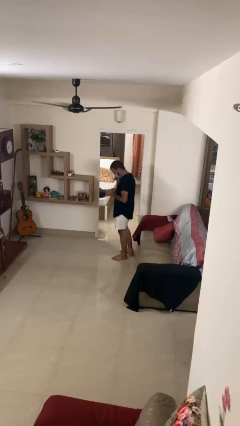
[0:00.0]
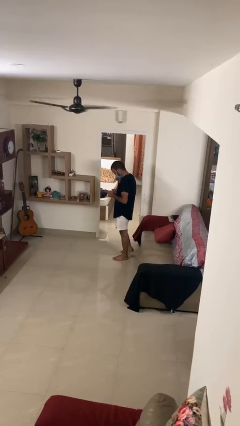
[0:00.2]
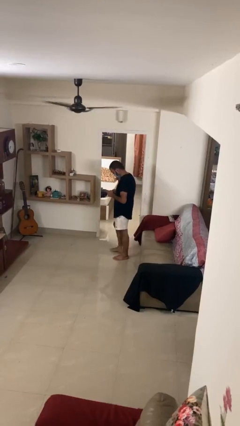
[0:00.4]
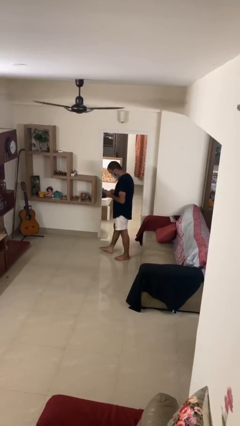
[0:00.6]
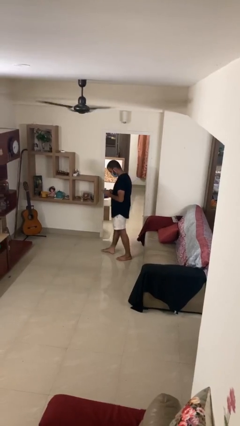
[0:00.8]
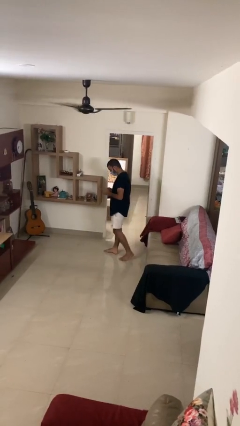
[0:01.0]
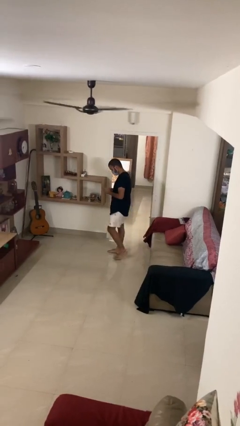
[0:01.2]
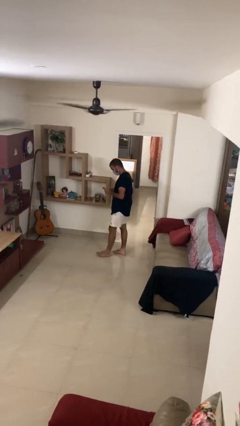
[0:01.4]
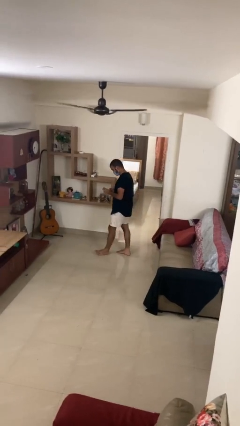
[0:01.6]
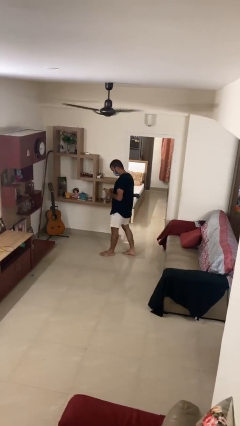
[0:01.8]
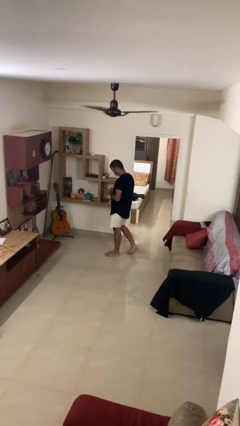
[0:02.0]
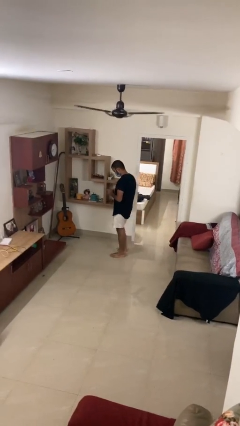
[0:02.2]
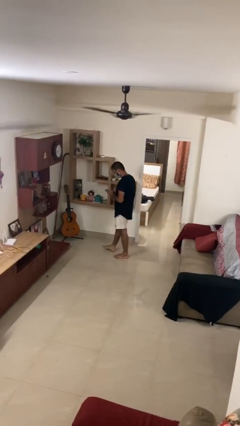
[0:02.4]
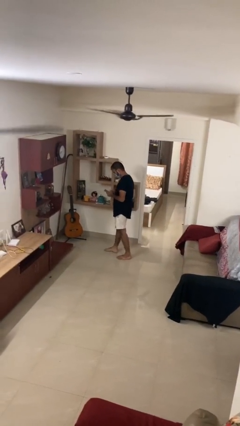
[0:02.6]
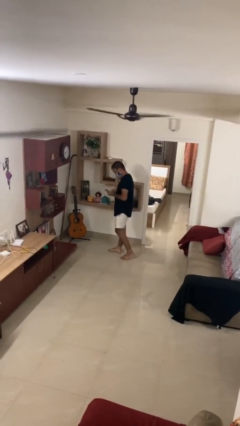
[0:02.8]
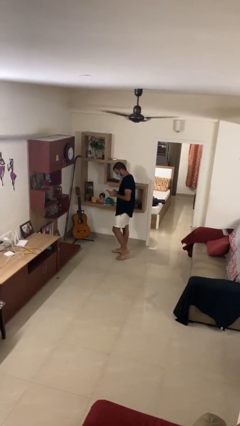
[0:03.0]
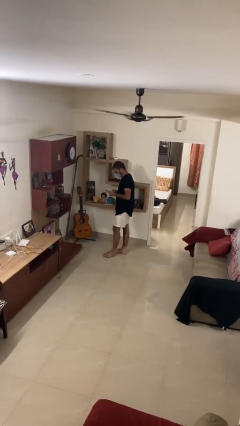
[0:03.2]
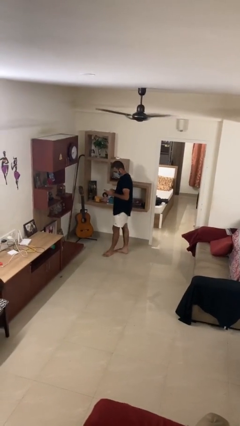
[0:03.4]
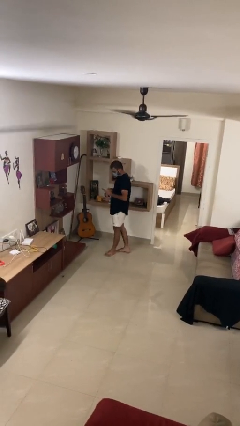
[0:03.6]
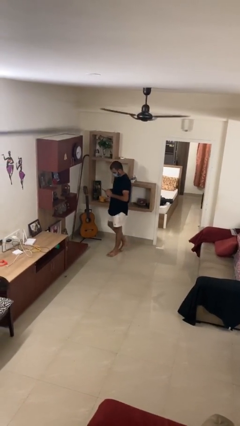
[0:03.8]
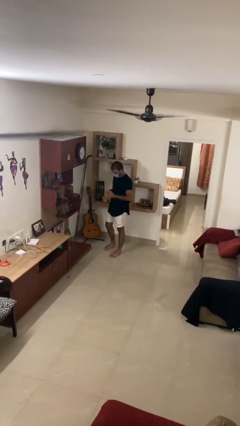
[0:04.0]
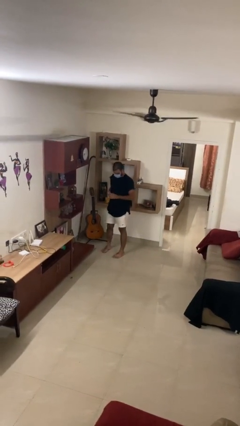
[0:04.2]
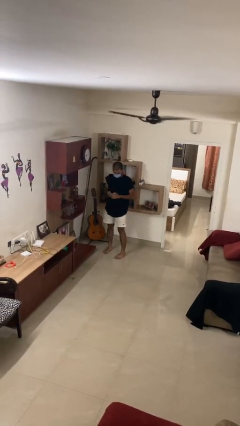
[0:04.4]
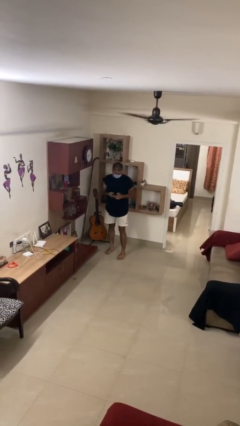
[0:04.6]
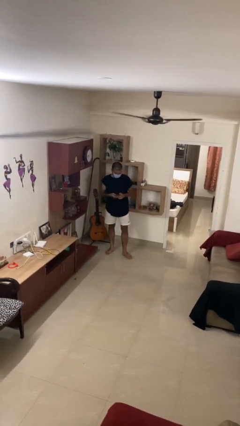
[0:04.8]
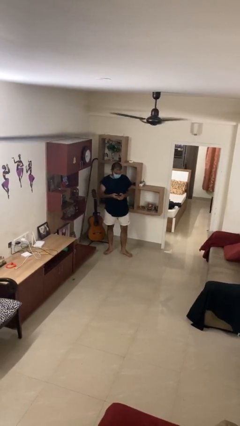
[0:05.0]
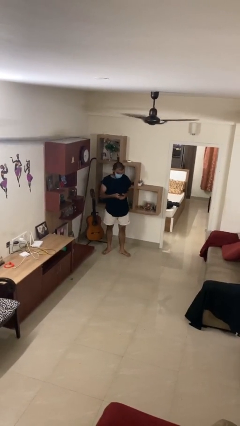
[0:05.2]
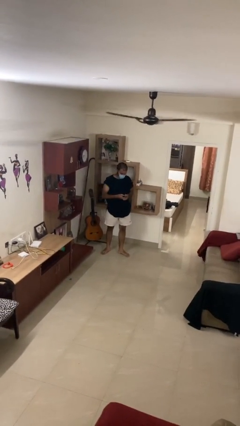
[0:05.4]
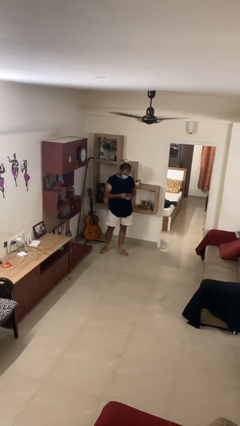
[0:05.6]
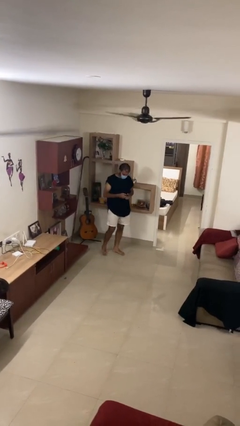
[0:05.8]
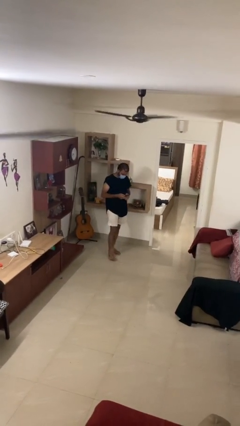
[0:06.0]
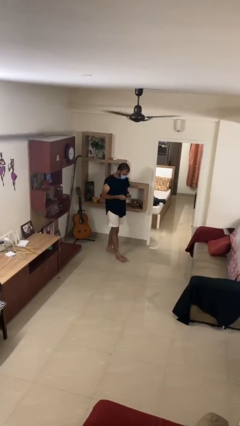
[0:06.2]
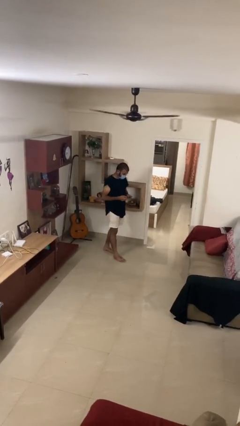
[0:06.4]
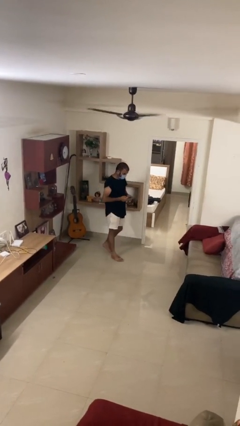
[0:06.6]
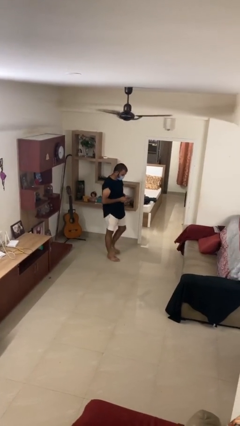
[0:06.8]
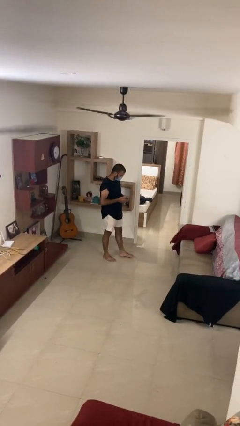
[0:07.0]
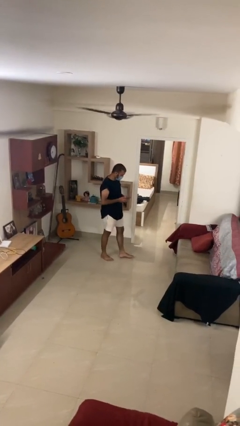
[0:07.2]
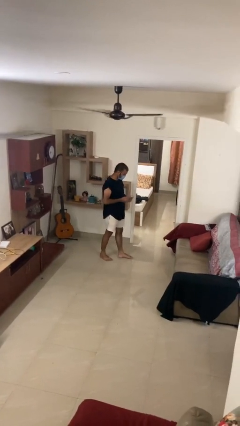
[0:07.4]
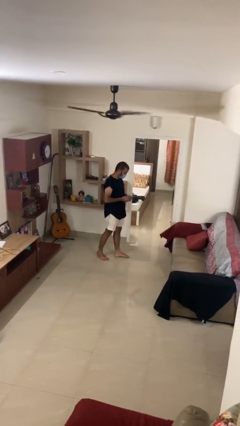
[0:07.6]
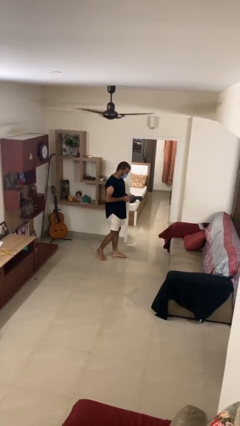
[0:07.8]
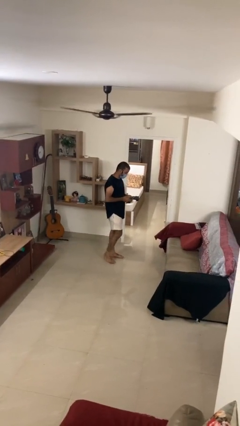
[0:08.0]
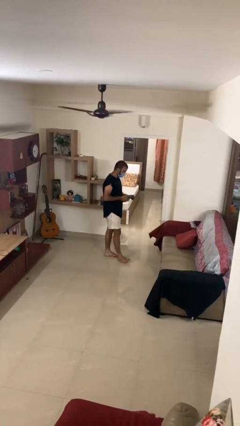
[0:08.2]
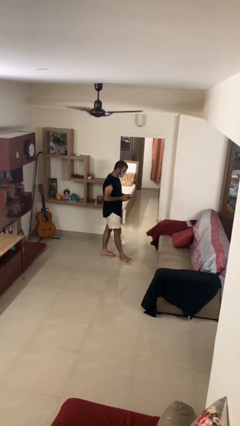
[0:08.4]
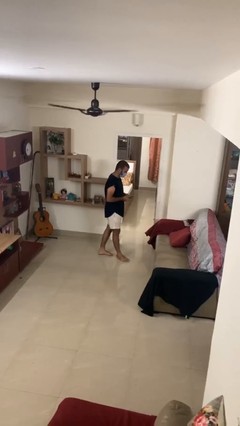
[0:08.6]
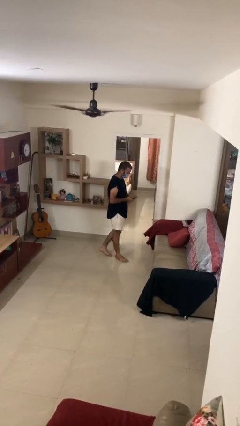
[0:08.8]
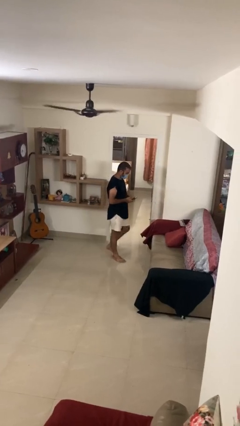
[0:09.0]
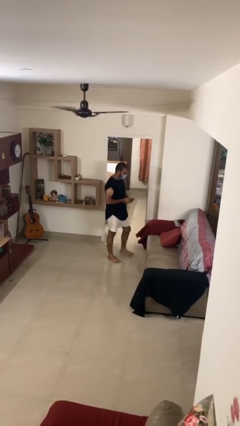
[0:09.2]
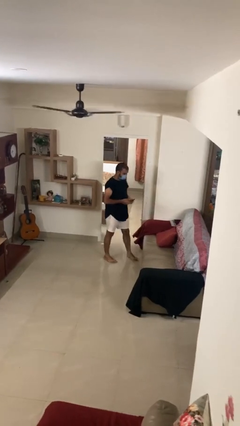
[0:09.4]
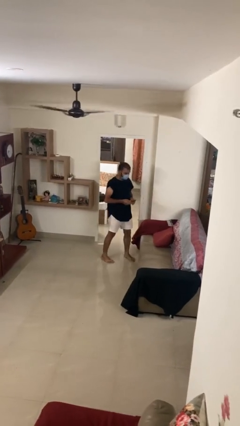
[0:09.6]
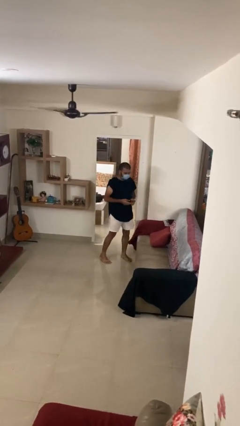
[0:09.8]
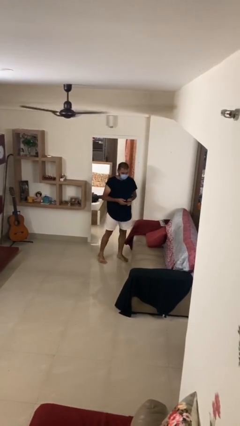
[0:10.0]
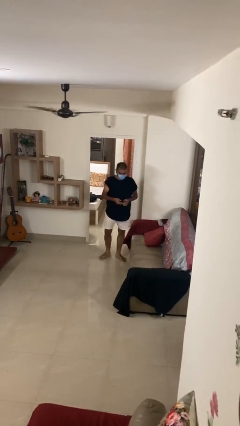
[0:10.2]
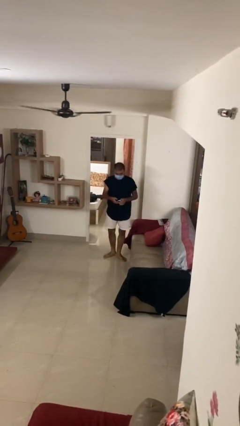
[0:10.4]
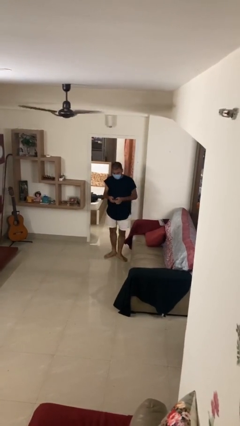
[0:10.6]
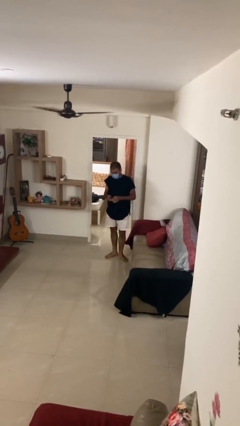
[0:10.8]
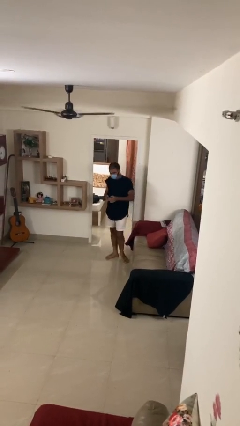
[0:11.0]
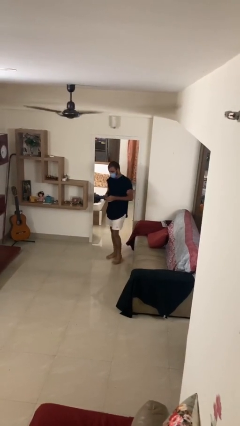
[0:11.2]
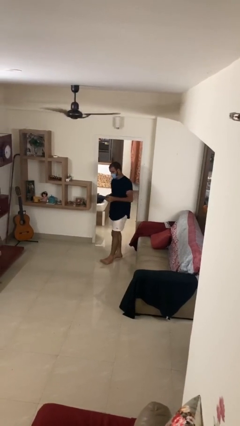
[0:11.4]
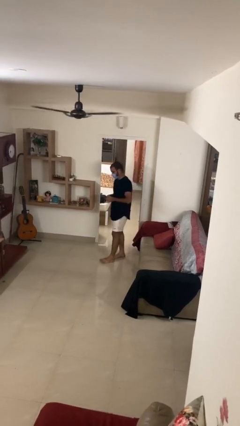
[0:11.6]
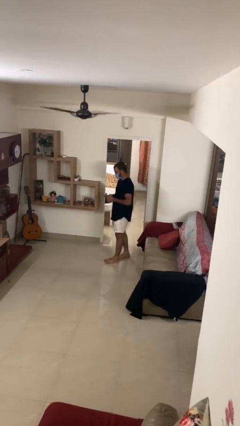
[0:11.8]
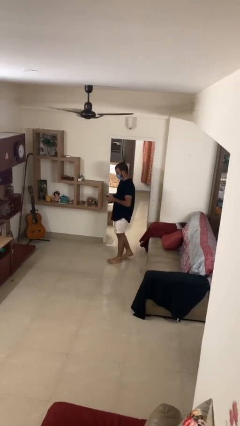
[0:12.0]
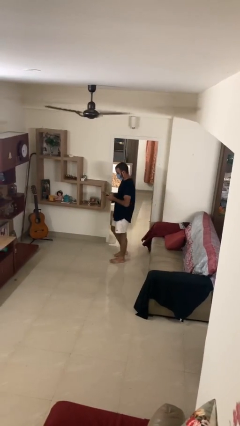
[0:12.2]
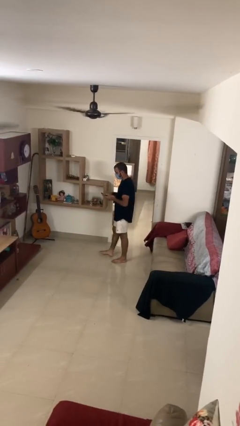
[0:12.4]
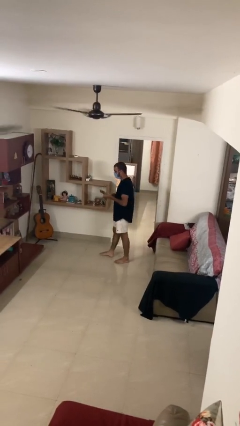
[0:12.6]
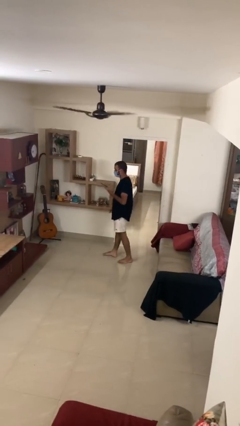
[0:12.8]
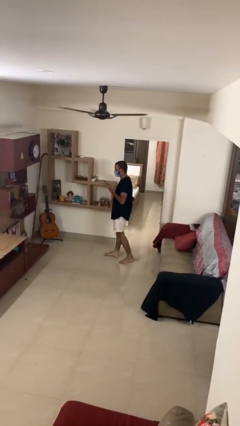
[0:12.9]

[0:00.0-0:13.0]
person texts on phone

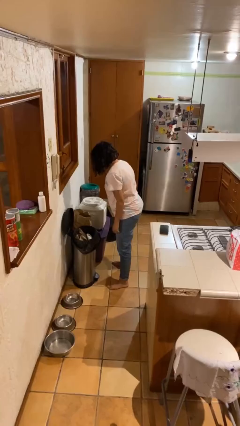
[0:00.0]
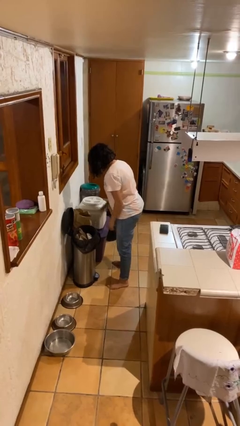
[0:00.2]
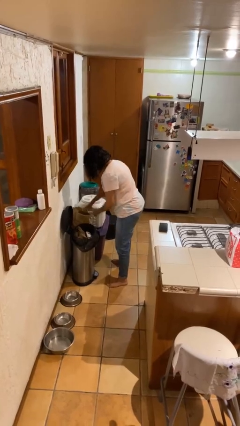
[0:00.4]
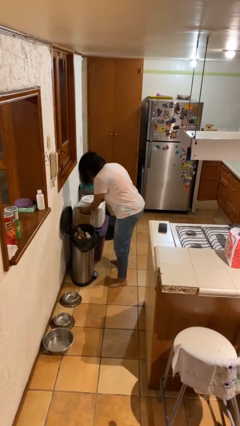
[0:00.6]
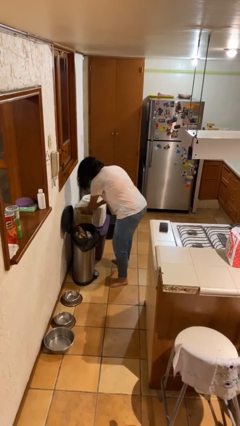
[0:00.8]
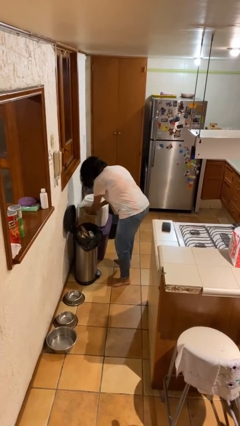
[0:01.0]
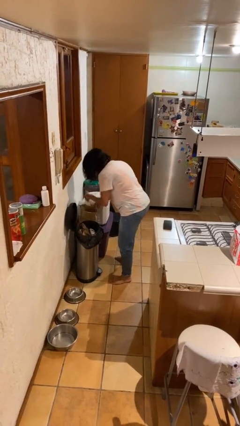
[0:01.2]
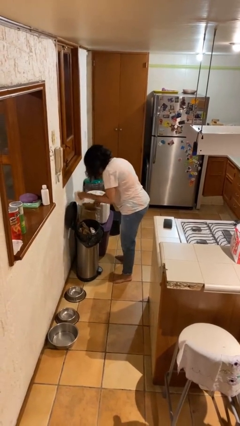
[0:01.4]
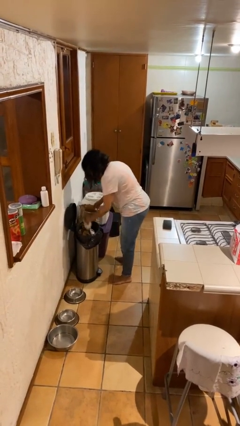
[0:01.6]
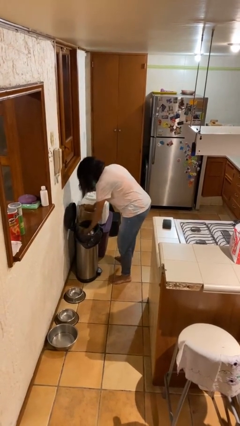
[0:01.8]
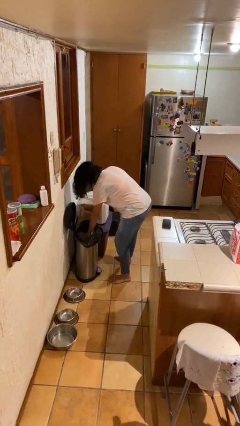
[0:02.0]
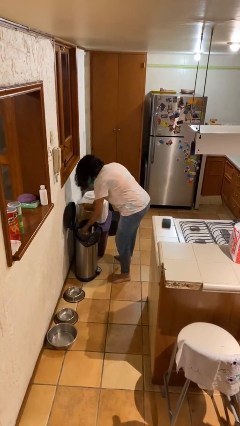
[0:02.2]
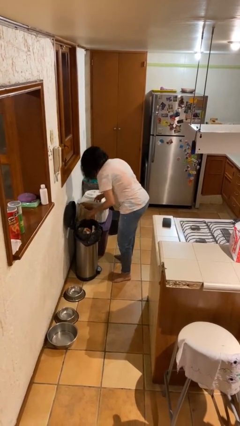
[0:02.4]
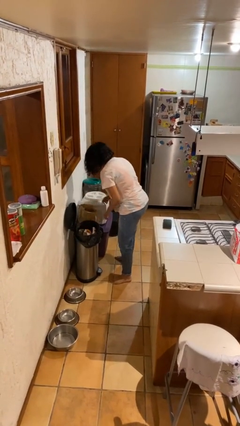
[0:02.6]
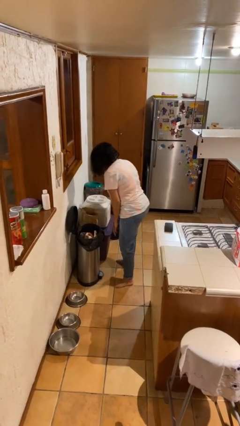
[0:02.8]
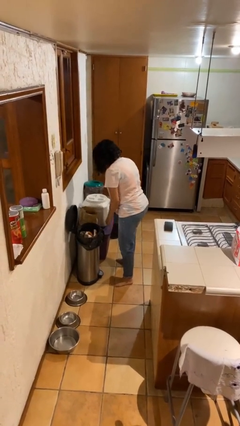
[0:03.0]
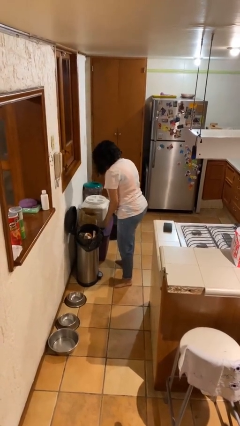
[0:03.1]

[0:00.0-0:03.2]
person discards trash

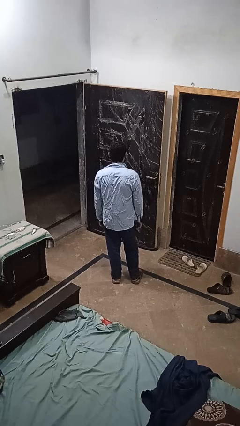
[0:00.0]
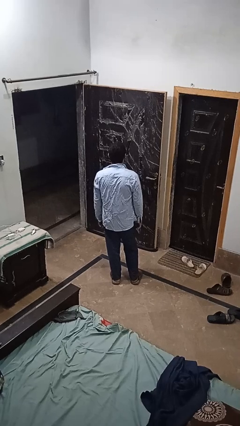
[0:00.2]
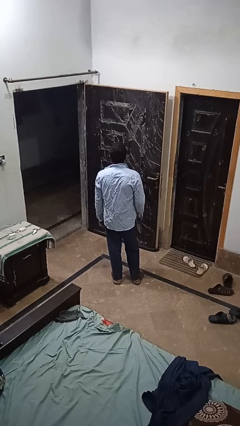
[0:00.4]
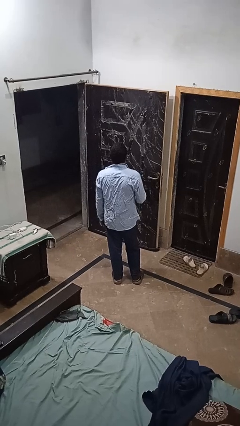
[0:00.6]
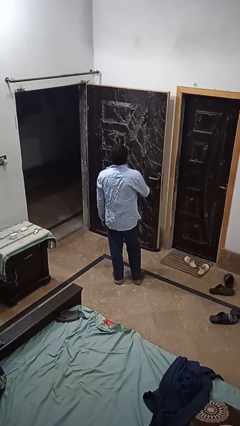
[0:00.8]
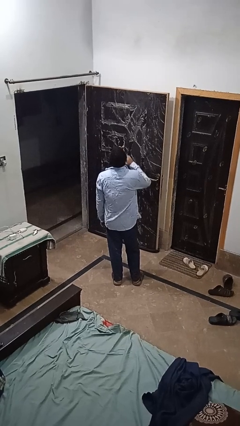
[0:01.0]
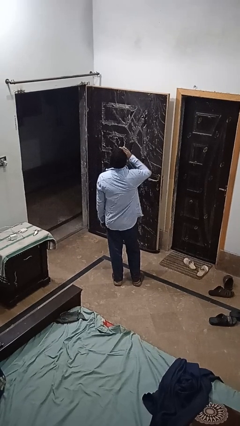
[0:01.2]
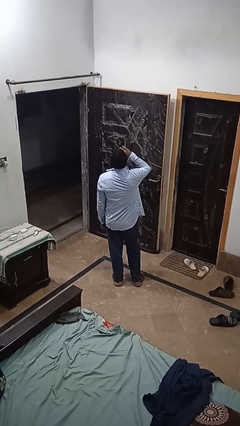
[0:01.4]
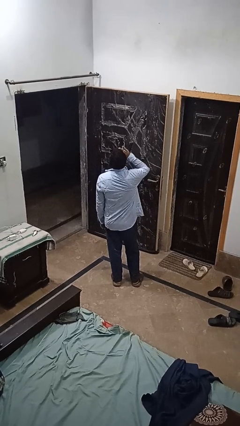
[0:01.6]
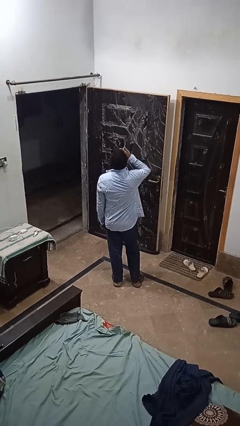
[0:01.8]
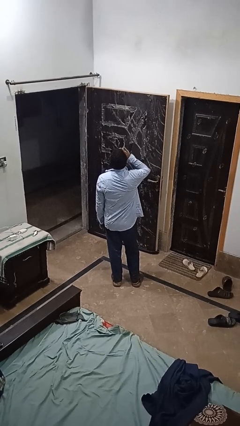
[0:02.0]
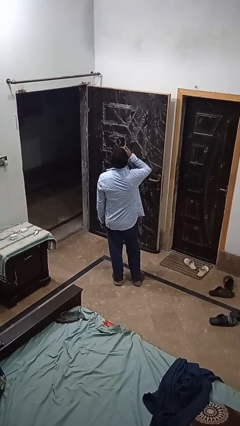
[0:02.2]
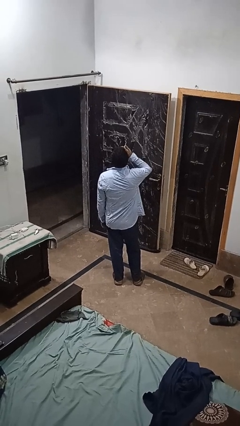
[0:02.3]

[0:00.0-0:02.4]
person yawns
